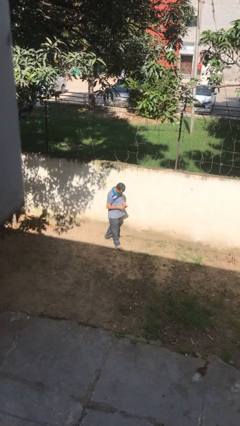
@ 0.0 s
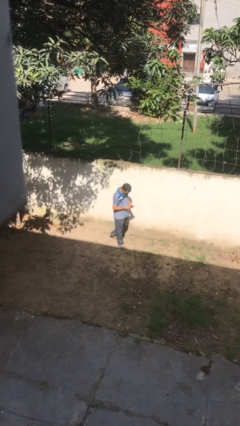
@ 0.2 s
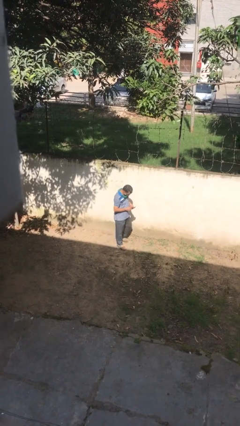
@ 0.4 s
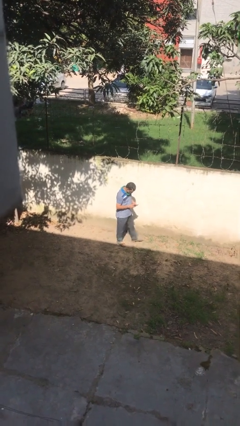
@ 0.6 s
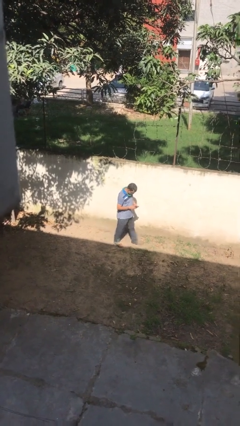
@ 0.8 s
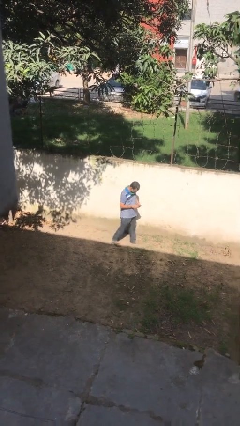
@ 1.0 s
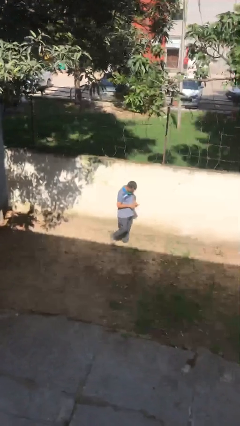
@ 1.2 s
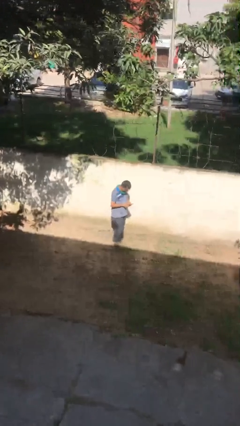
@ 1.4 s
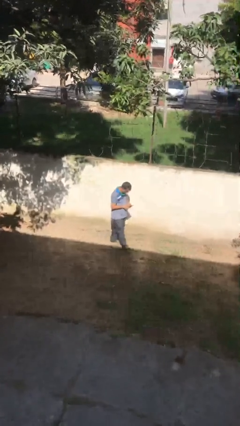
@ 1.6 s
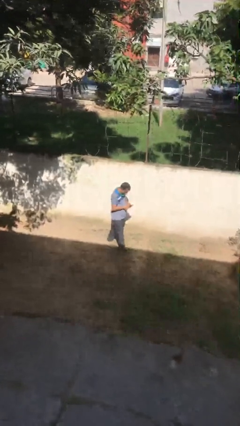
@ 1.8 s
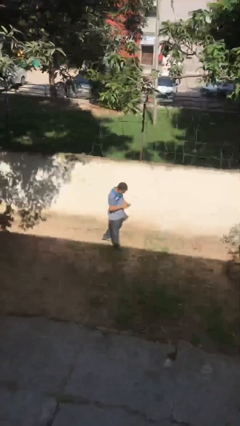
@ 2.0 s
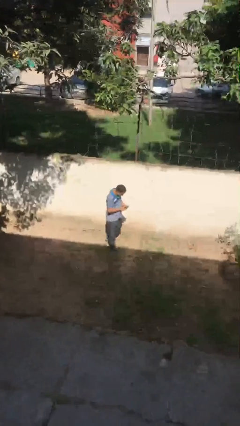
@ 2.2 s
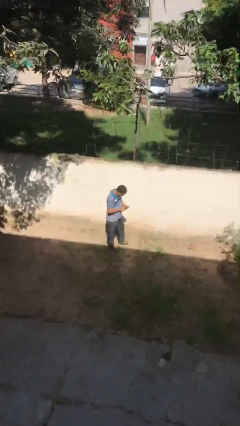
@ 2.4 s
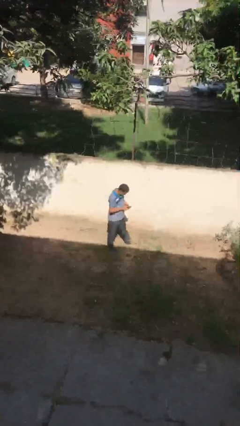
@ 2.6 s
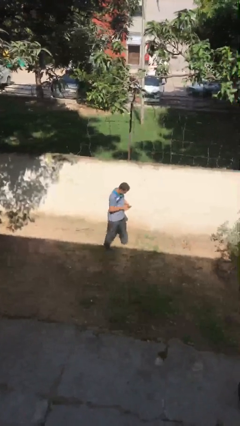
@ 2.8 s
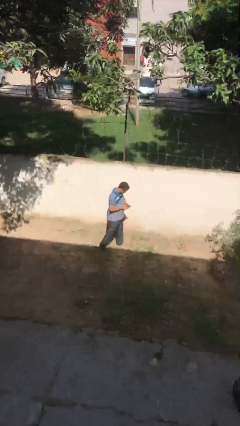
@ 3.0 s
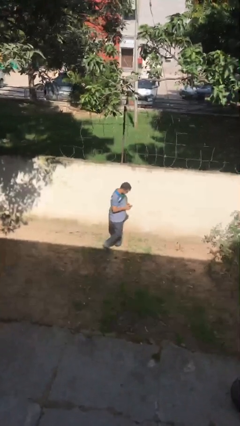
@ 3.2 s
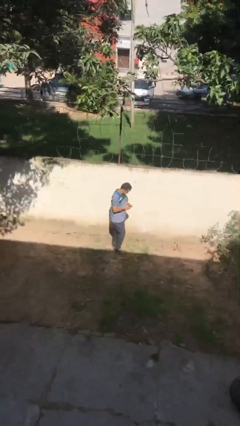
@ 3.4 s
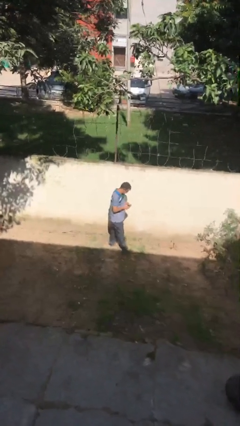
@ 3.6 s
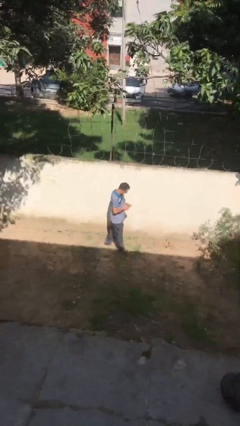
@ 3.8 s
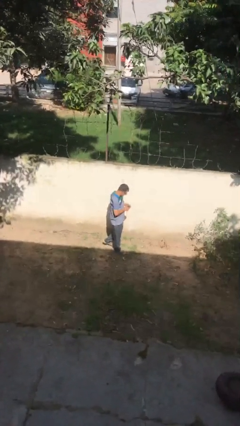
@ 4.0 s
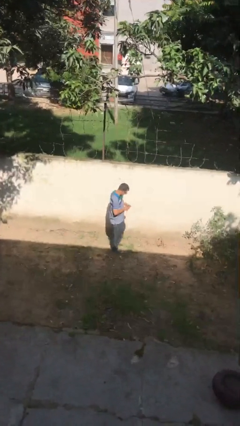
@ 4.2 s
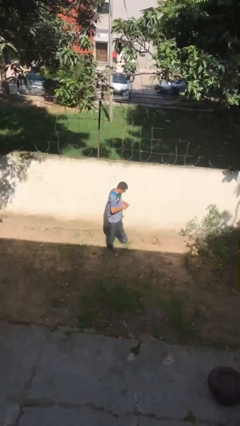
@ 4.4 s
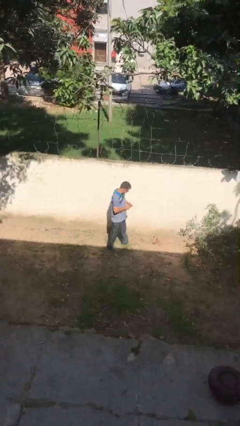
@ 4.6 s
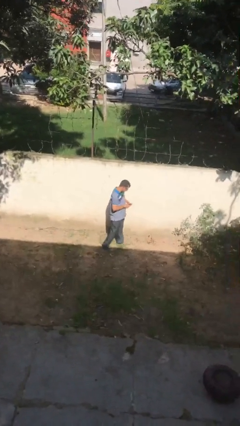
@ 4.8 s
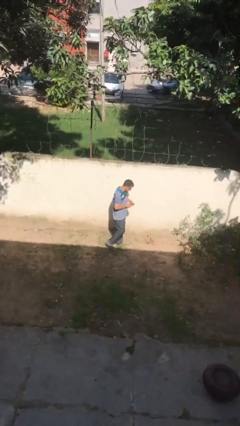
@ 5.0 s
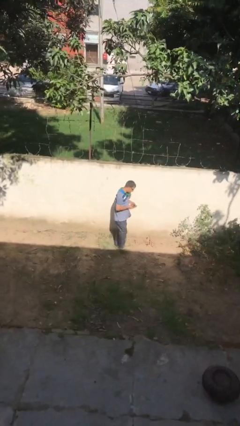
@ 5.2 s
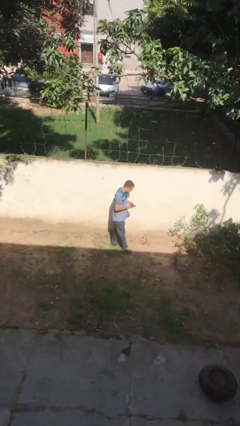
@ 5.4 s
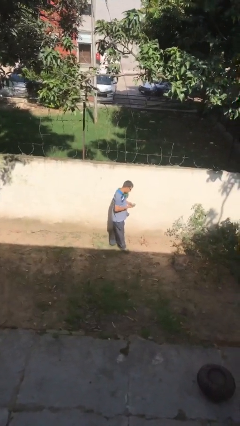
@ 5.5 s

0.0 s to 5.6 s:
person texts on phone

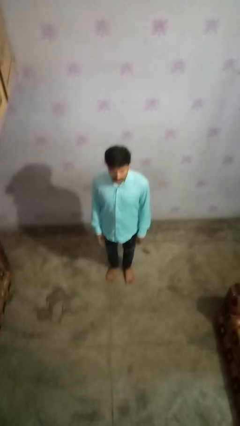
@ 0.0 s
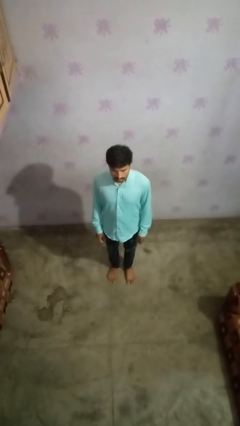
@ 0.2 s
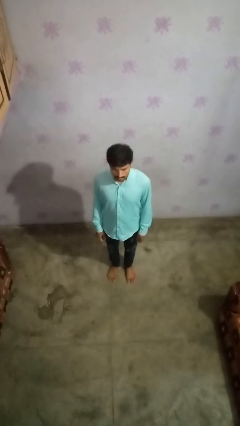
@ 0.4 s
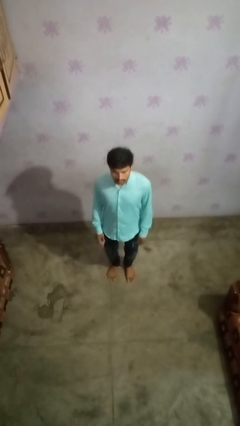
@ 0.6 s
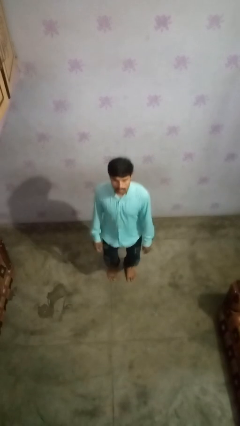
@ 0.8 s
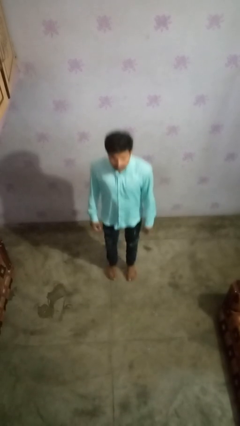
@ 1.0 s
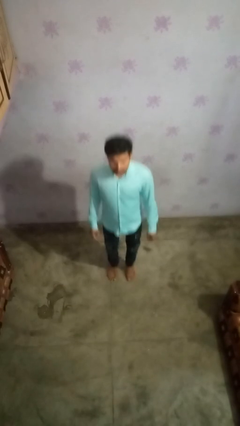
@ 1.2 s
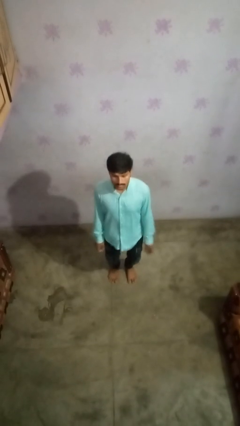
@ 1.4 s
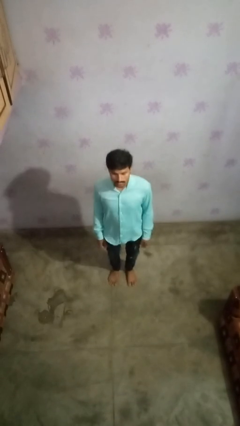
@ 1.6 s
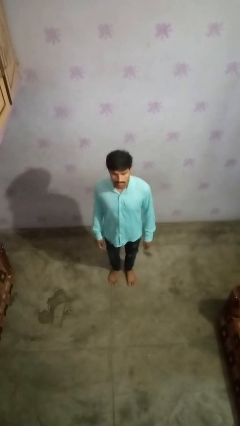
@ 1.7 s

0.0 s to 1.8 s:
person jumps

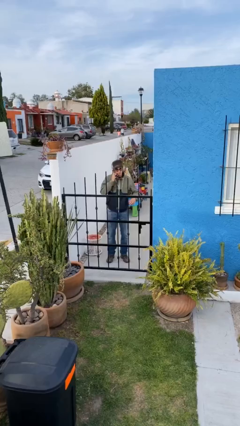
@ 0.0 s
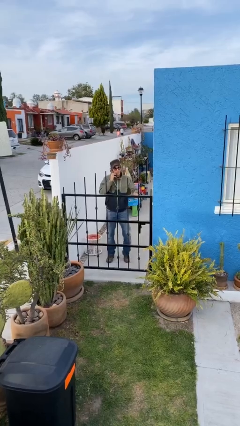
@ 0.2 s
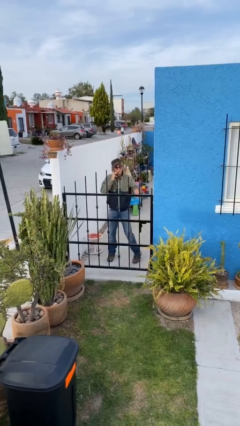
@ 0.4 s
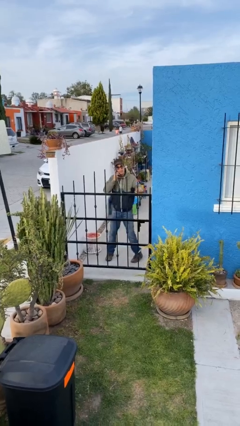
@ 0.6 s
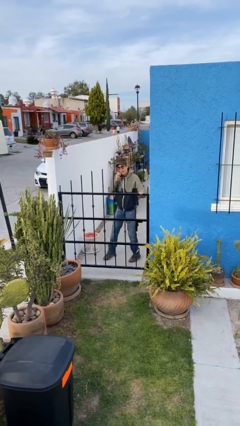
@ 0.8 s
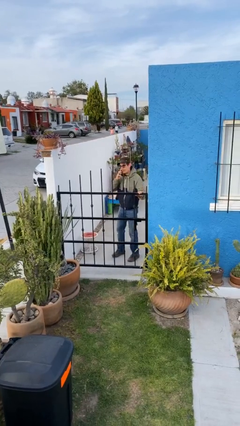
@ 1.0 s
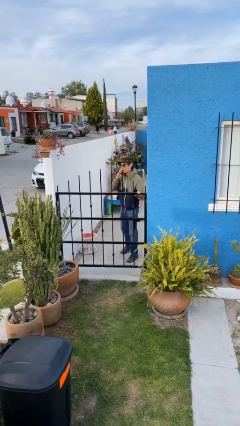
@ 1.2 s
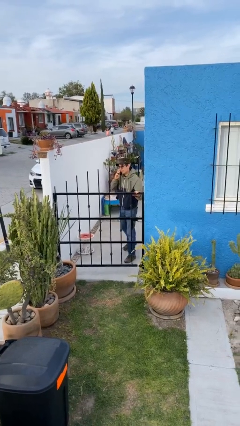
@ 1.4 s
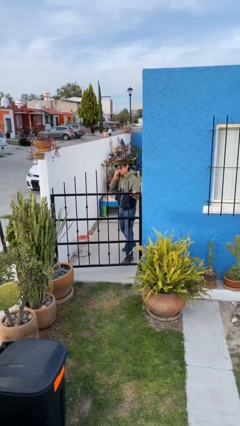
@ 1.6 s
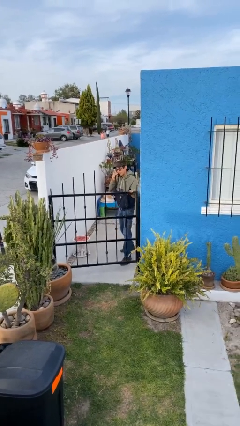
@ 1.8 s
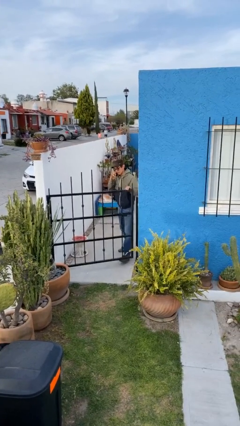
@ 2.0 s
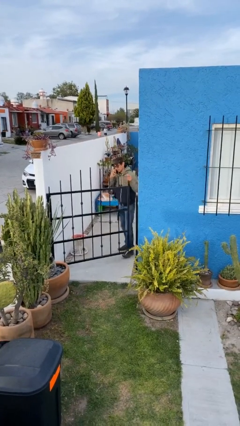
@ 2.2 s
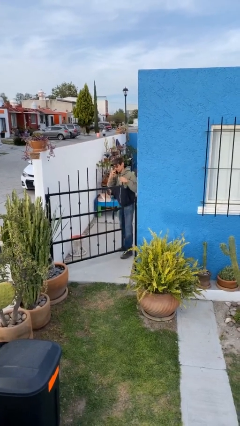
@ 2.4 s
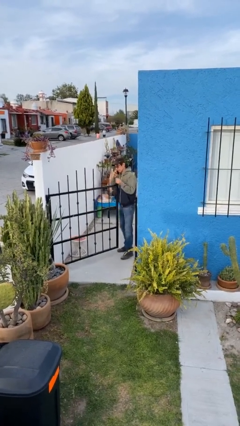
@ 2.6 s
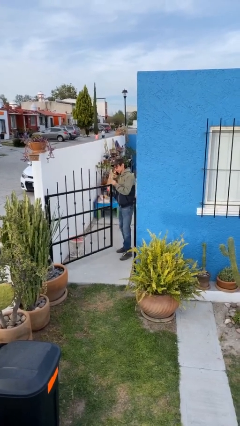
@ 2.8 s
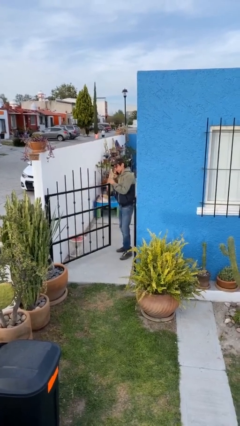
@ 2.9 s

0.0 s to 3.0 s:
person opens facility door

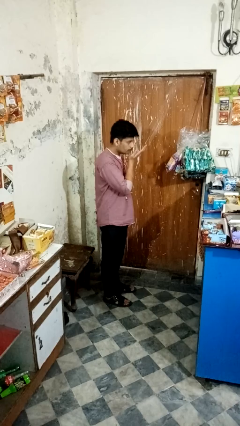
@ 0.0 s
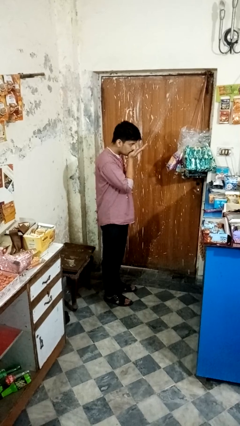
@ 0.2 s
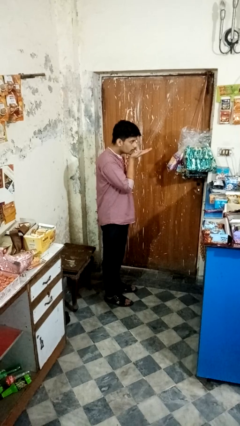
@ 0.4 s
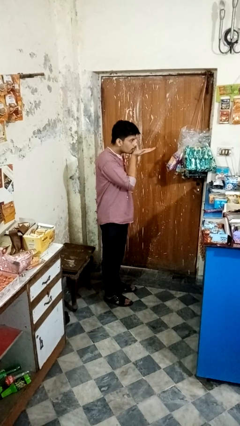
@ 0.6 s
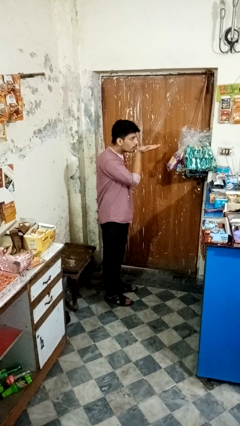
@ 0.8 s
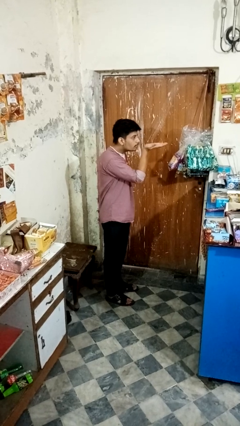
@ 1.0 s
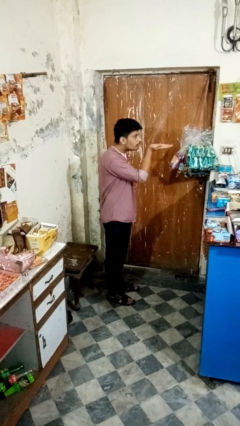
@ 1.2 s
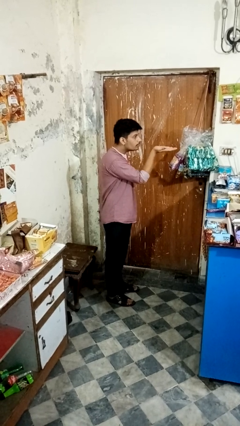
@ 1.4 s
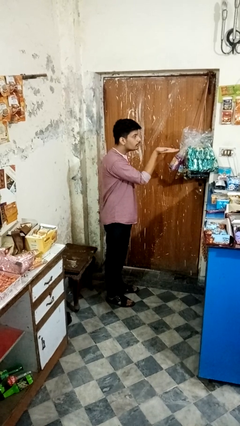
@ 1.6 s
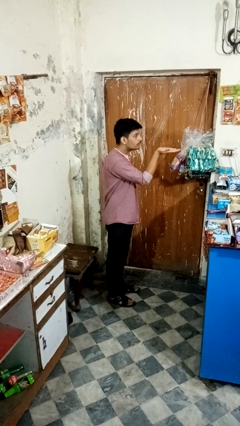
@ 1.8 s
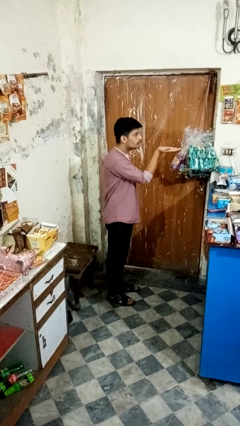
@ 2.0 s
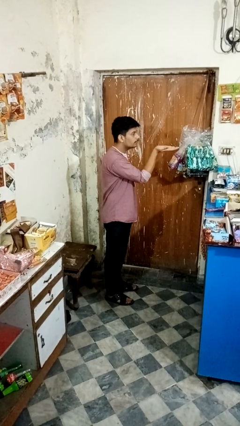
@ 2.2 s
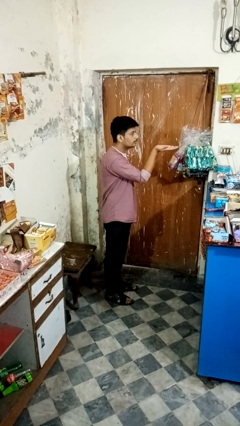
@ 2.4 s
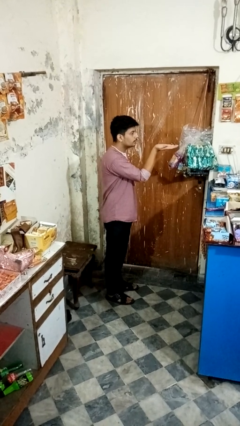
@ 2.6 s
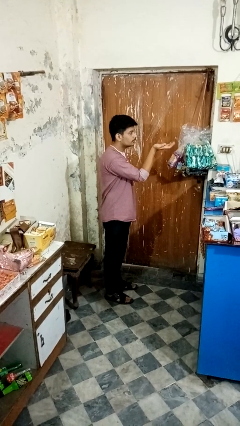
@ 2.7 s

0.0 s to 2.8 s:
person gestures blow kiss

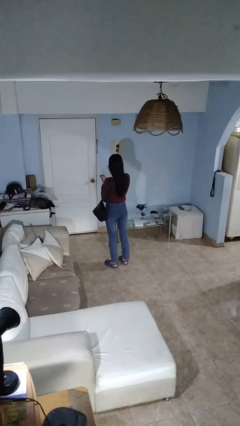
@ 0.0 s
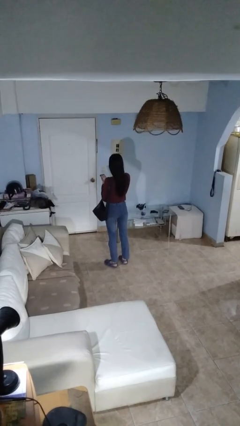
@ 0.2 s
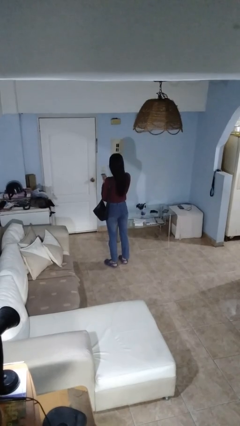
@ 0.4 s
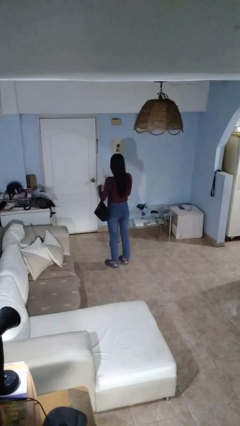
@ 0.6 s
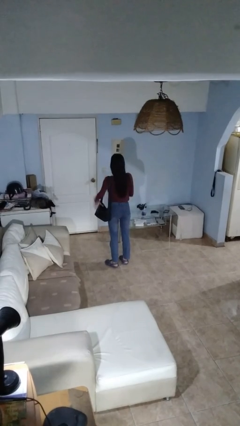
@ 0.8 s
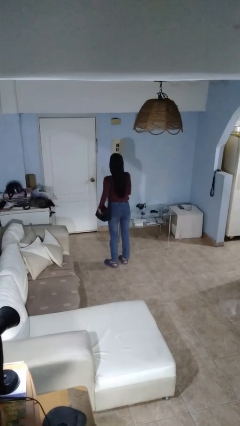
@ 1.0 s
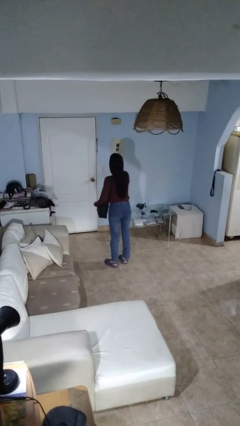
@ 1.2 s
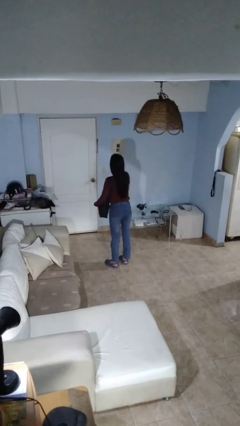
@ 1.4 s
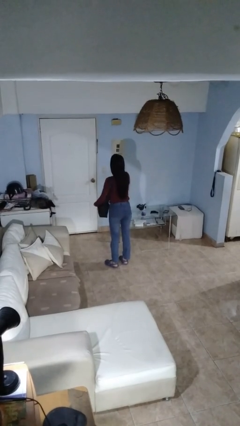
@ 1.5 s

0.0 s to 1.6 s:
person puts object into purse

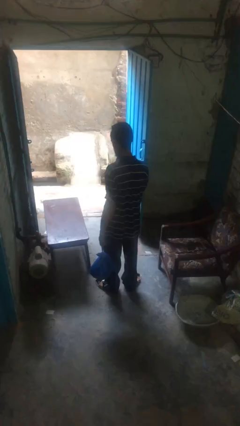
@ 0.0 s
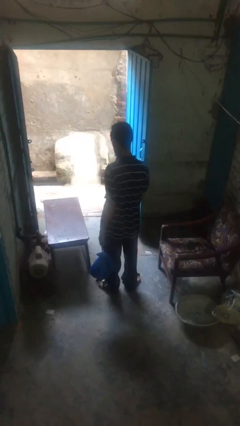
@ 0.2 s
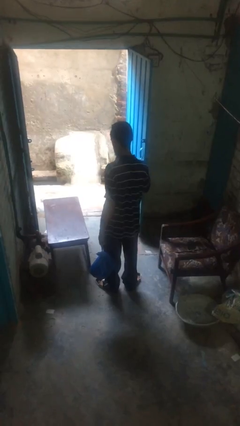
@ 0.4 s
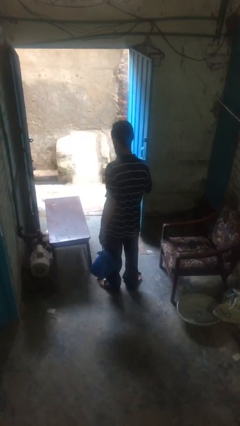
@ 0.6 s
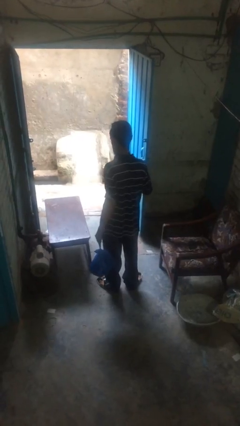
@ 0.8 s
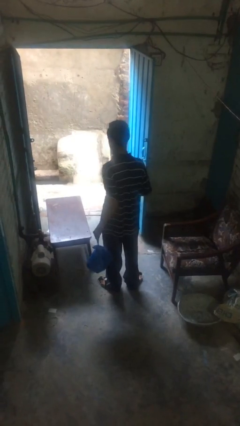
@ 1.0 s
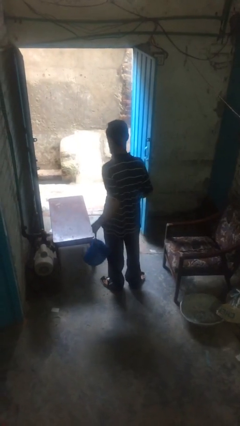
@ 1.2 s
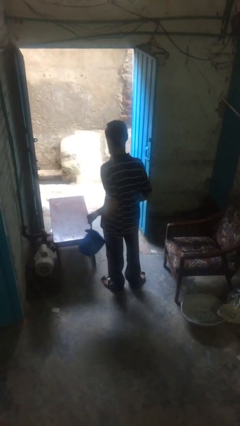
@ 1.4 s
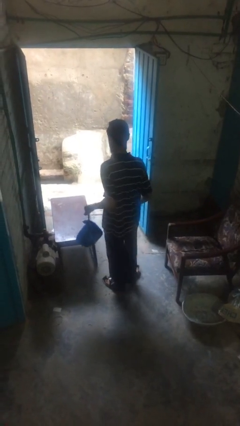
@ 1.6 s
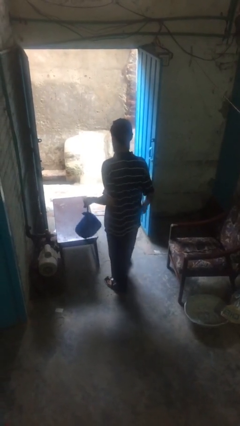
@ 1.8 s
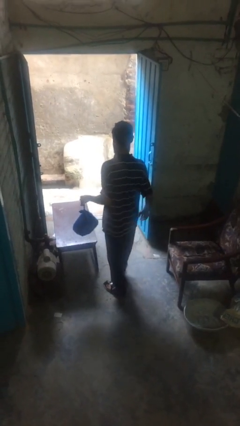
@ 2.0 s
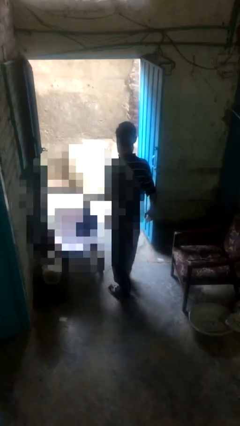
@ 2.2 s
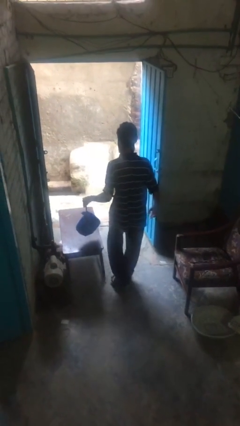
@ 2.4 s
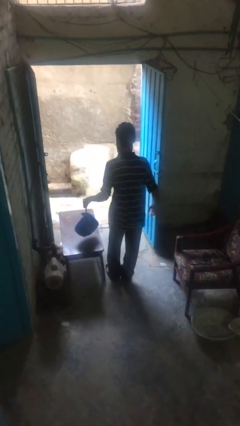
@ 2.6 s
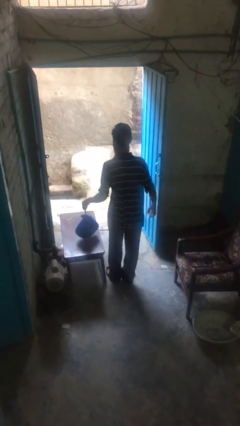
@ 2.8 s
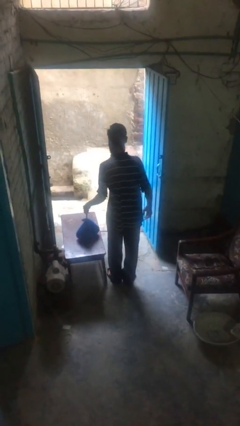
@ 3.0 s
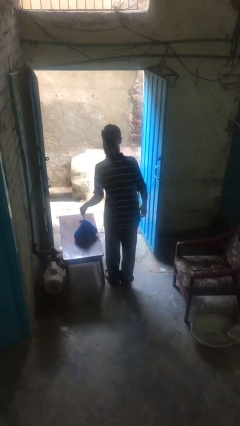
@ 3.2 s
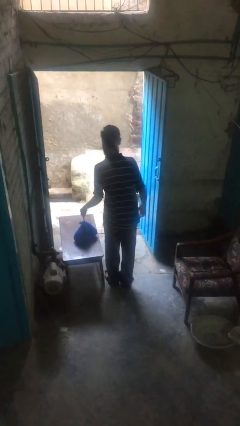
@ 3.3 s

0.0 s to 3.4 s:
person puts down object on table
